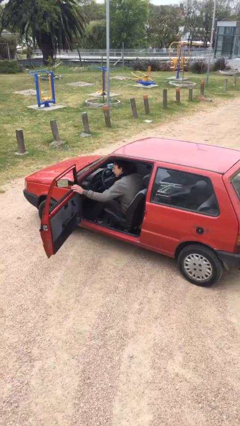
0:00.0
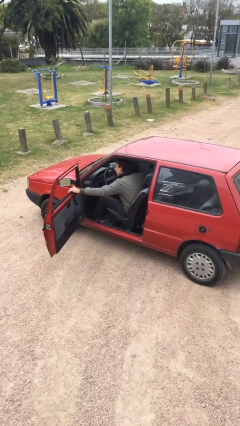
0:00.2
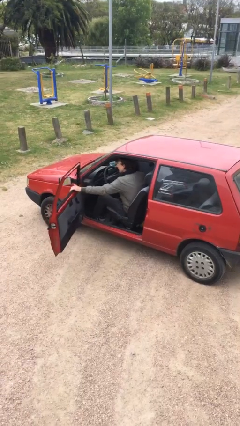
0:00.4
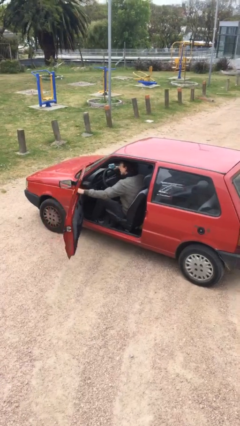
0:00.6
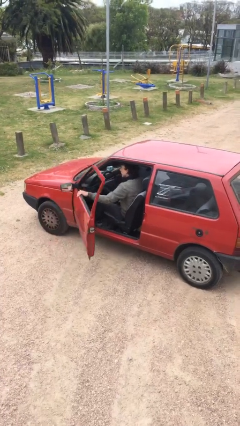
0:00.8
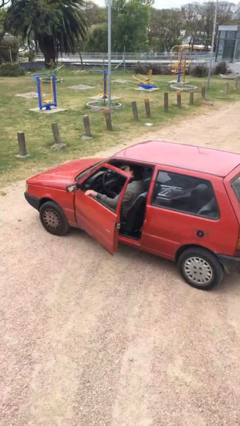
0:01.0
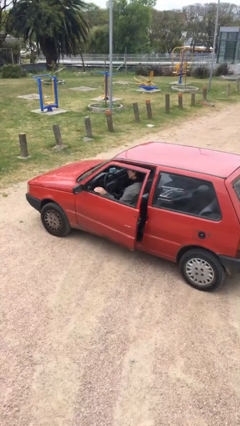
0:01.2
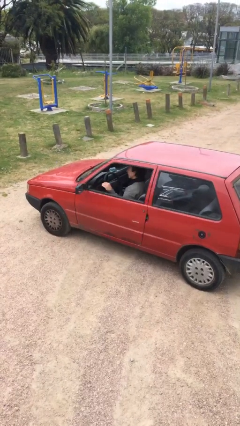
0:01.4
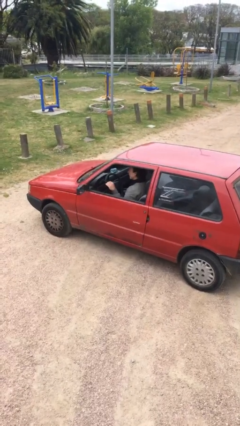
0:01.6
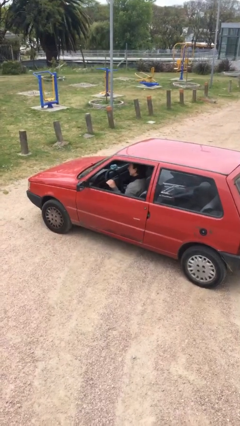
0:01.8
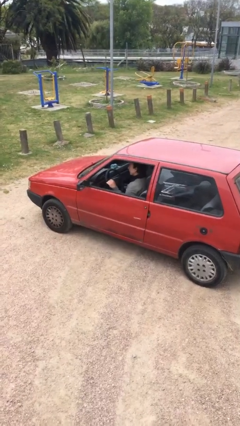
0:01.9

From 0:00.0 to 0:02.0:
person closes car door

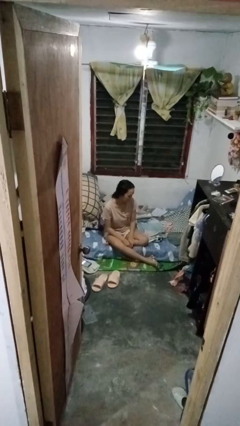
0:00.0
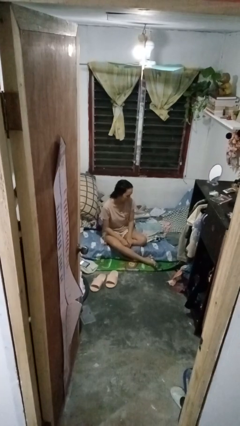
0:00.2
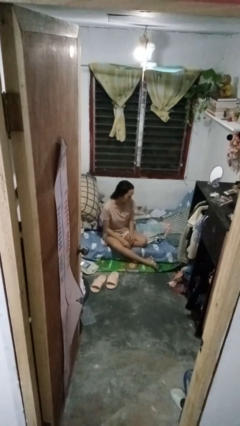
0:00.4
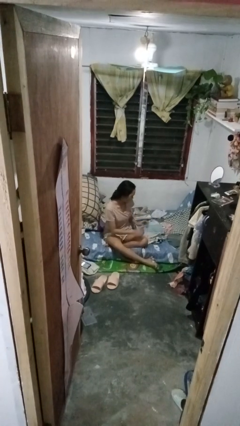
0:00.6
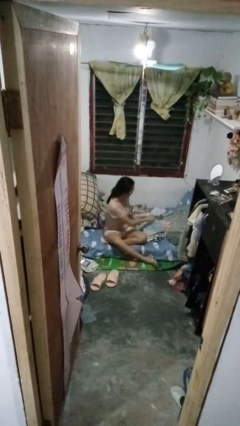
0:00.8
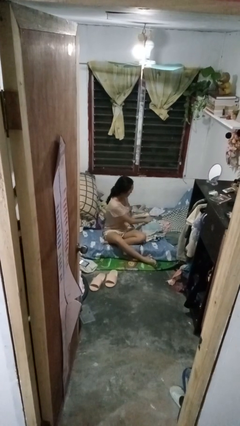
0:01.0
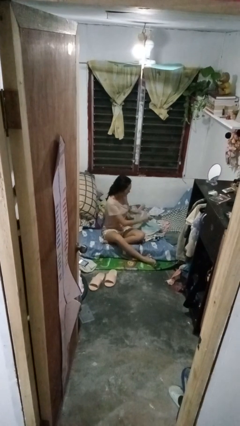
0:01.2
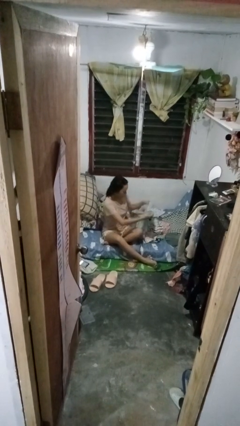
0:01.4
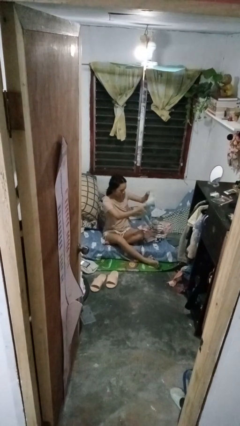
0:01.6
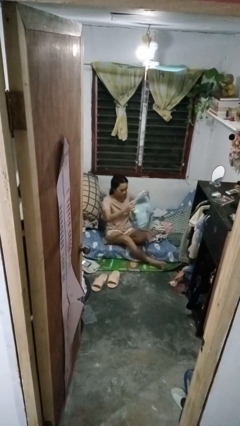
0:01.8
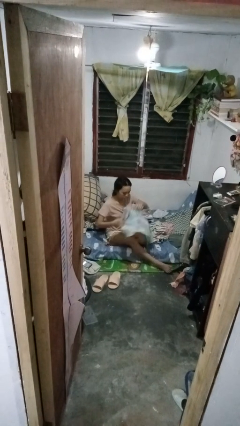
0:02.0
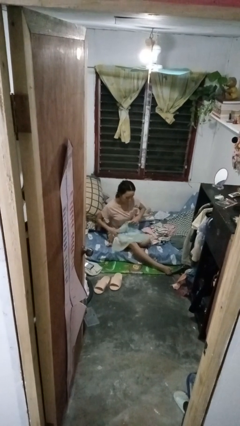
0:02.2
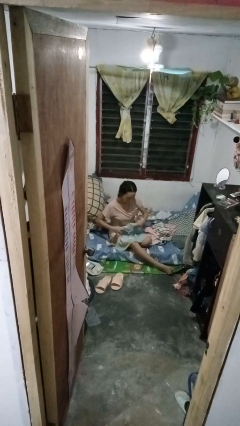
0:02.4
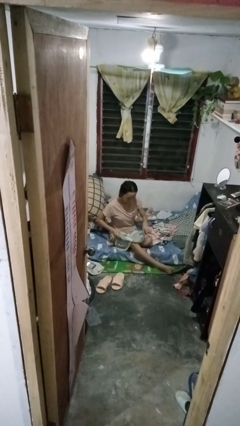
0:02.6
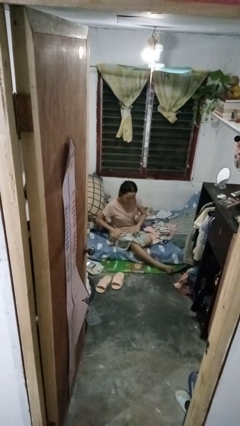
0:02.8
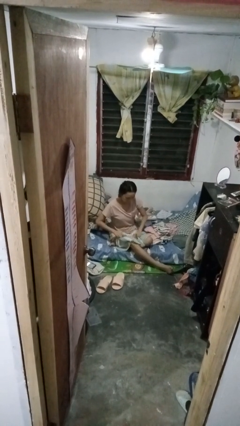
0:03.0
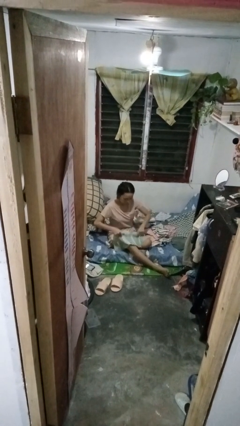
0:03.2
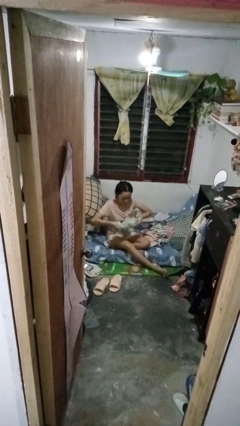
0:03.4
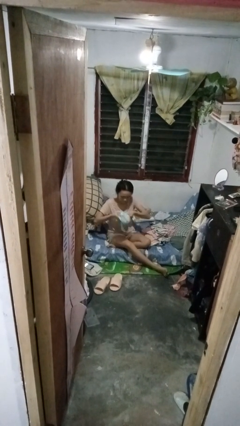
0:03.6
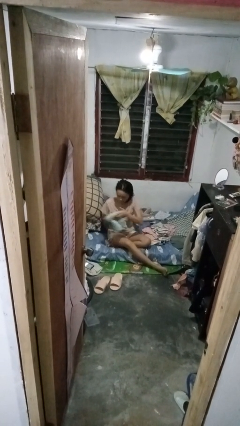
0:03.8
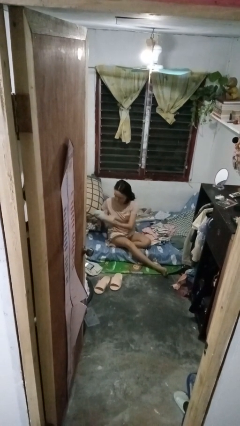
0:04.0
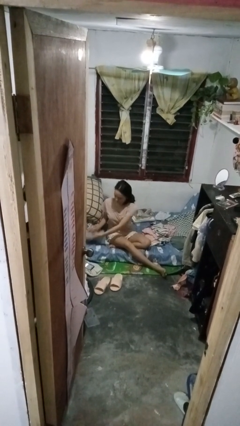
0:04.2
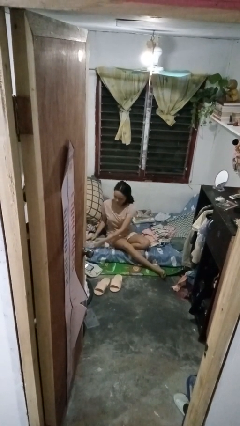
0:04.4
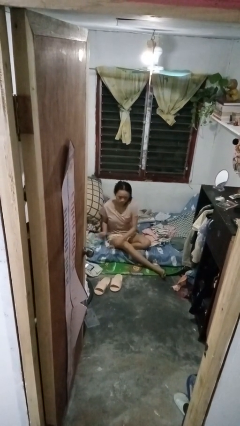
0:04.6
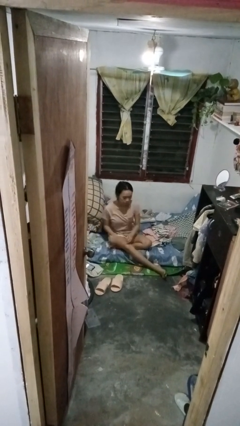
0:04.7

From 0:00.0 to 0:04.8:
person folds shirt

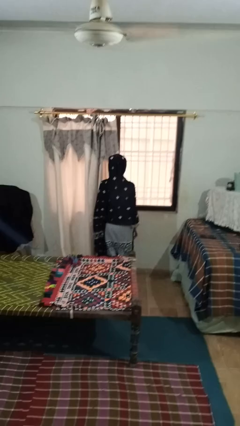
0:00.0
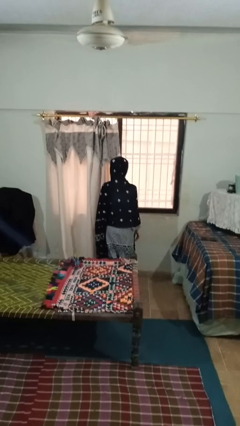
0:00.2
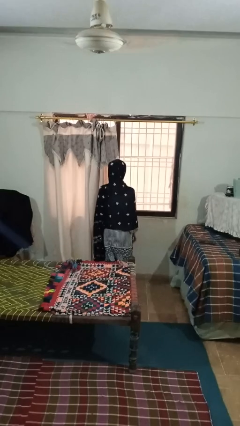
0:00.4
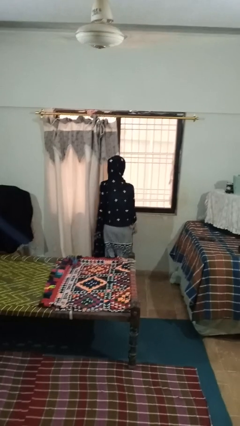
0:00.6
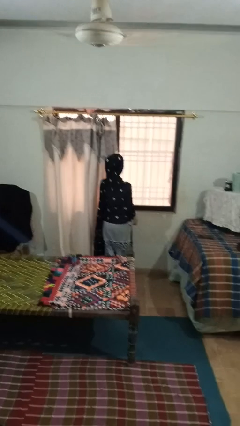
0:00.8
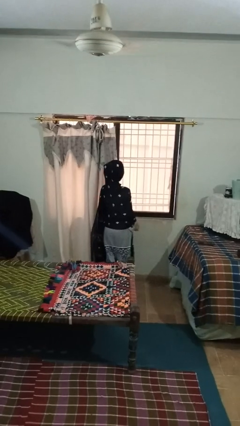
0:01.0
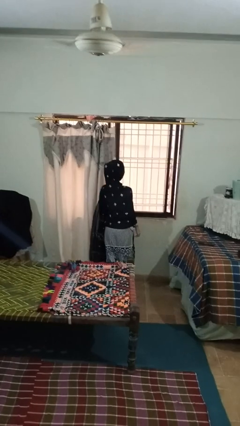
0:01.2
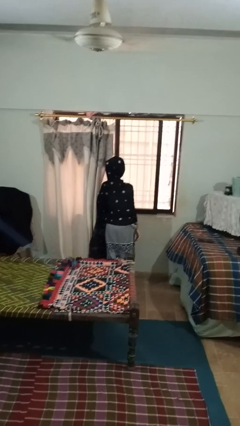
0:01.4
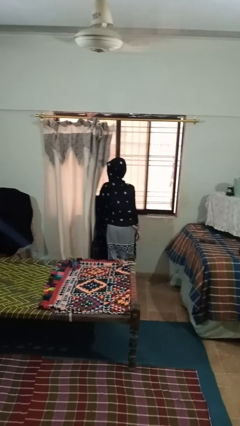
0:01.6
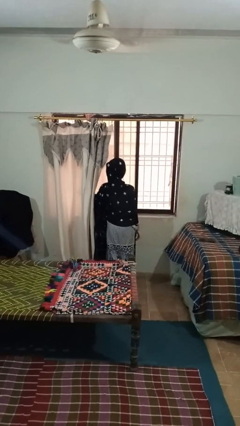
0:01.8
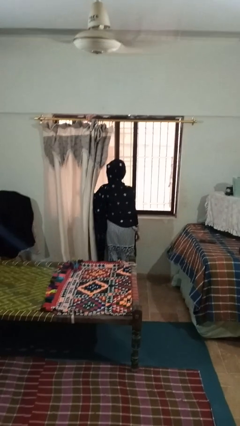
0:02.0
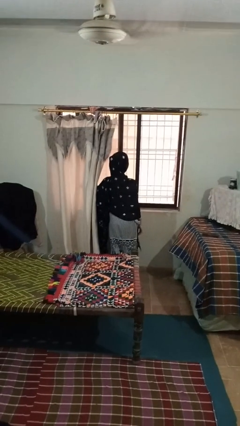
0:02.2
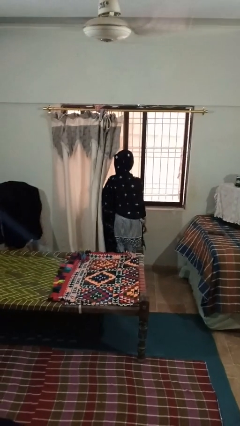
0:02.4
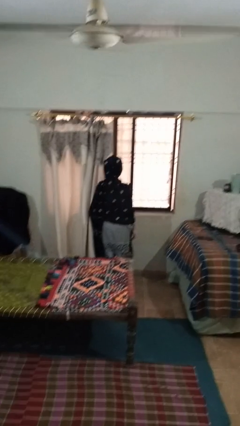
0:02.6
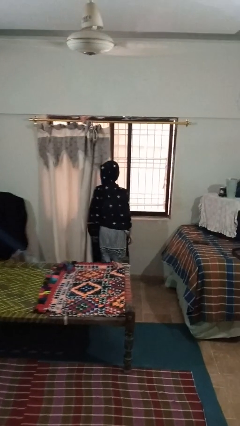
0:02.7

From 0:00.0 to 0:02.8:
person opens home window

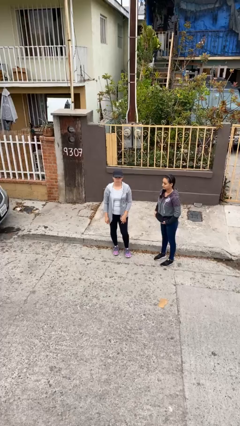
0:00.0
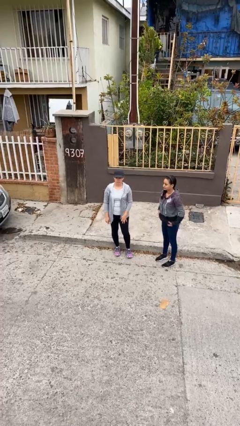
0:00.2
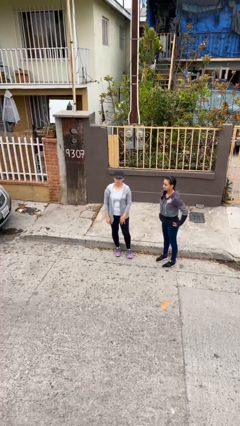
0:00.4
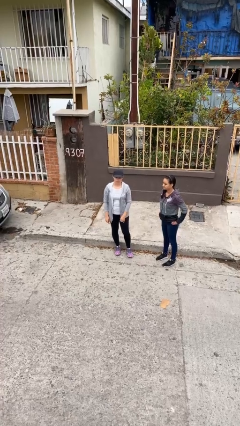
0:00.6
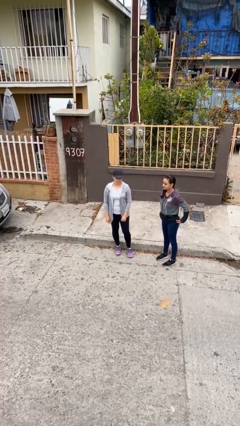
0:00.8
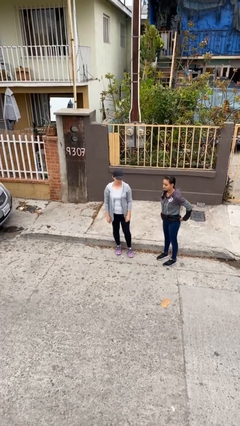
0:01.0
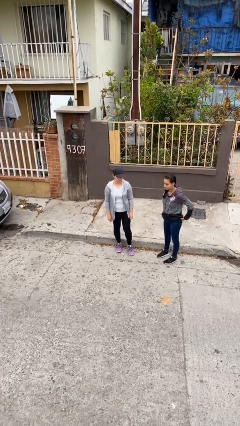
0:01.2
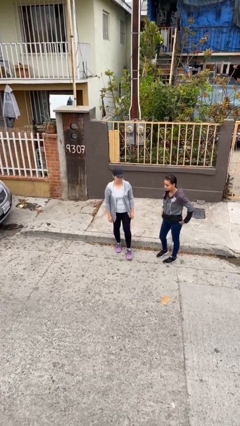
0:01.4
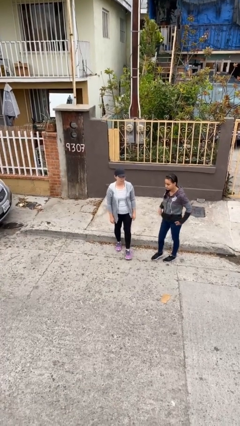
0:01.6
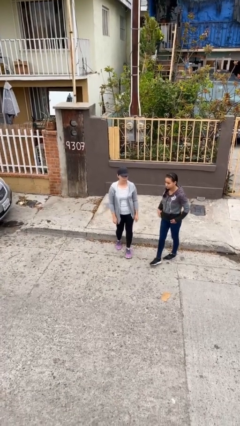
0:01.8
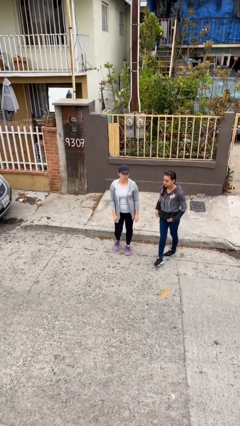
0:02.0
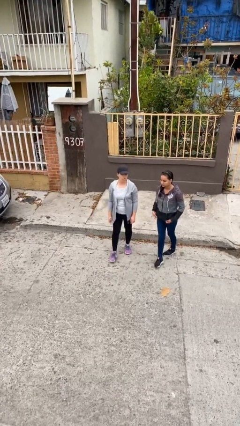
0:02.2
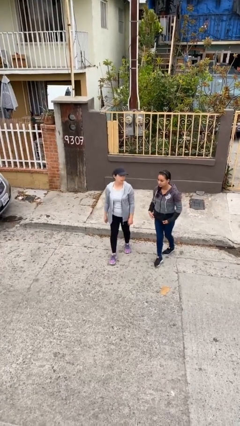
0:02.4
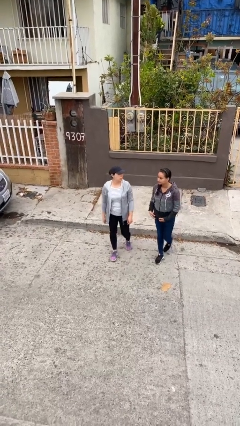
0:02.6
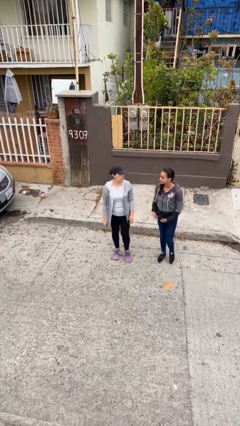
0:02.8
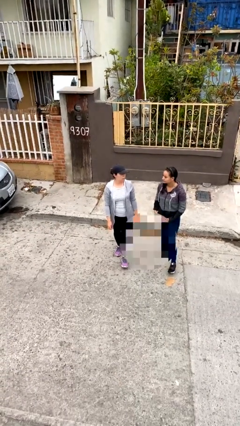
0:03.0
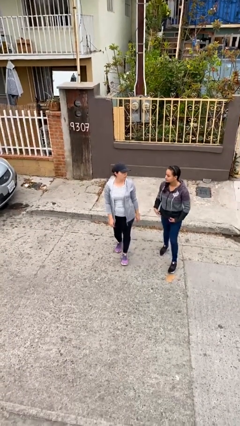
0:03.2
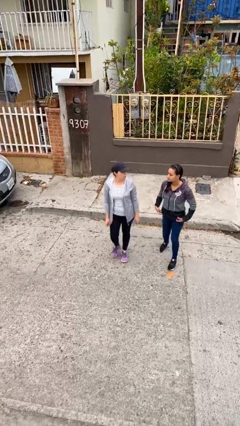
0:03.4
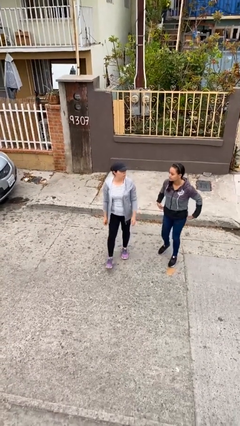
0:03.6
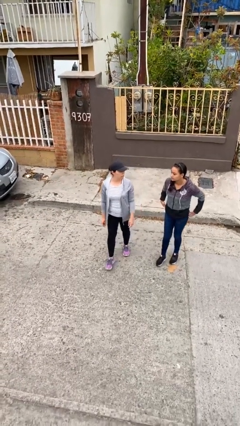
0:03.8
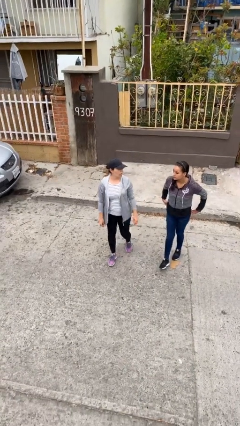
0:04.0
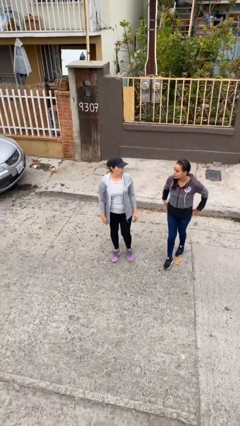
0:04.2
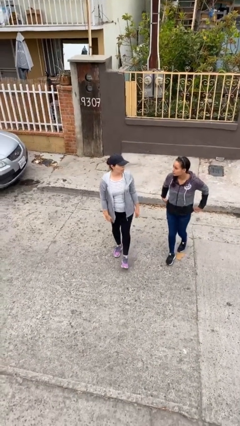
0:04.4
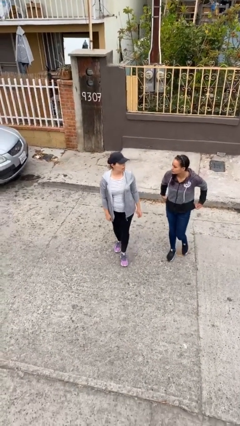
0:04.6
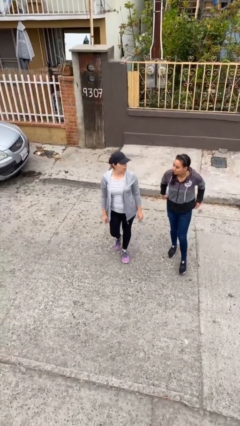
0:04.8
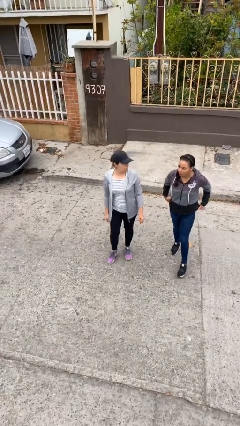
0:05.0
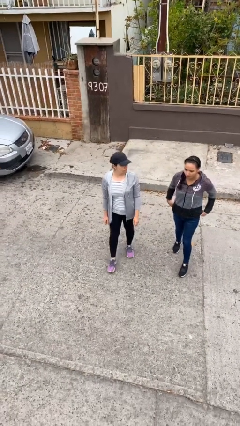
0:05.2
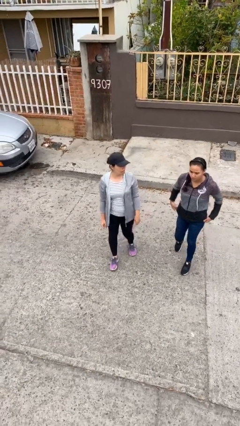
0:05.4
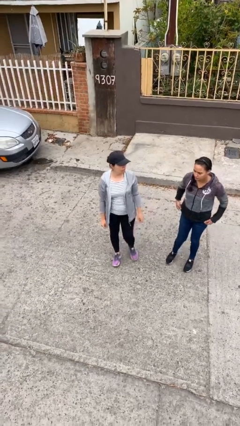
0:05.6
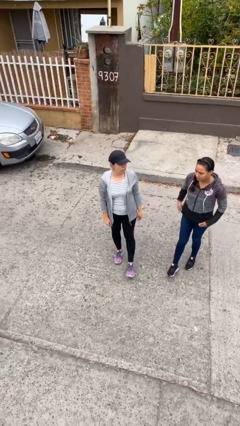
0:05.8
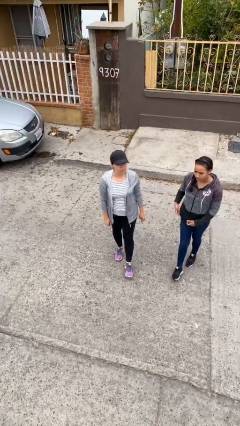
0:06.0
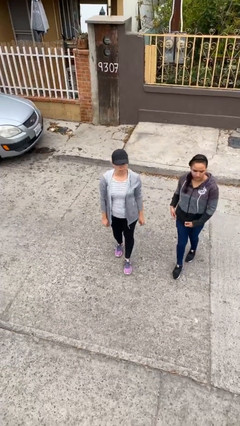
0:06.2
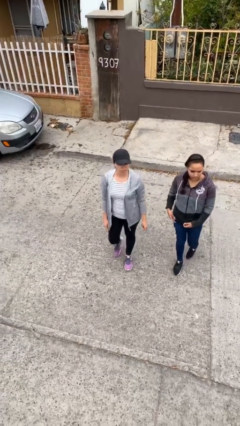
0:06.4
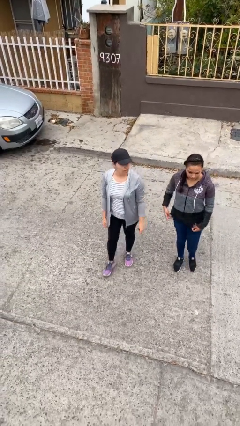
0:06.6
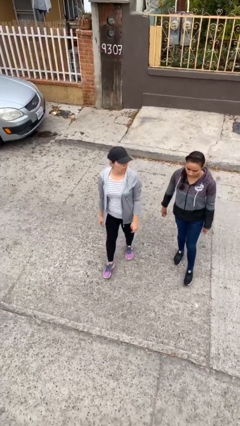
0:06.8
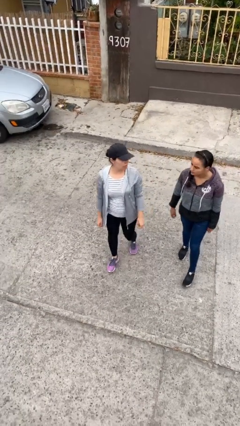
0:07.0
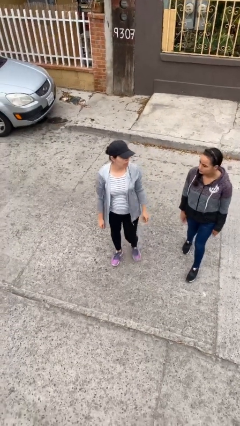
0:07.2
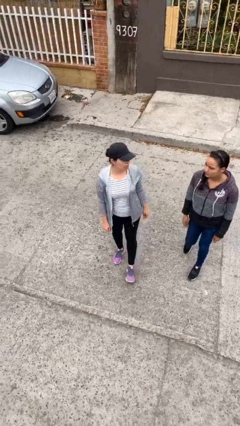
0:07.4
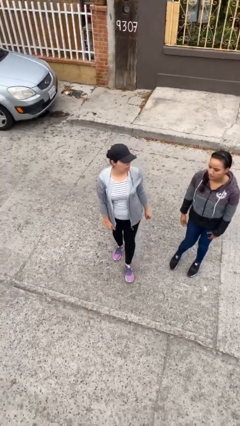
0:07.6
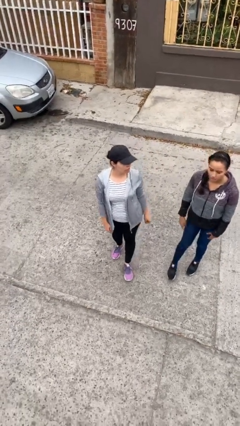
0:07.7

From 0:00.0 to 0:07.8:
person talks to person

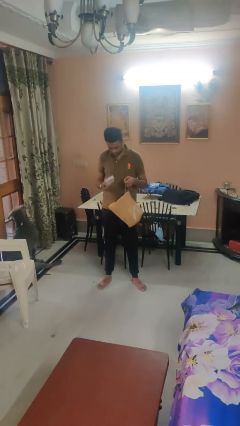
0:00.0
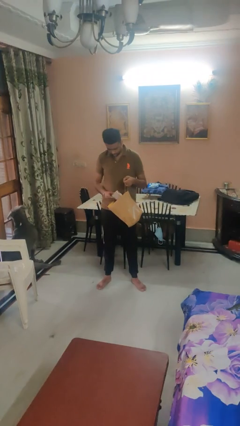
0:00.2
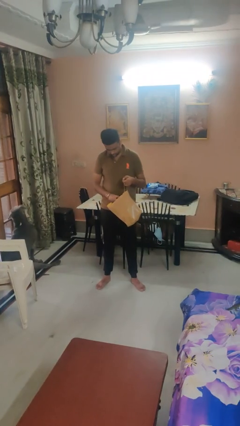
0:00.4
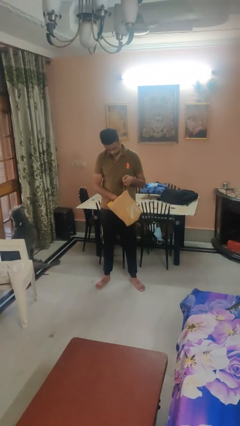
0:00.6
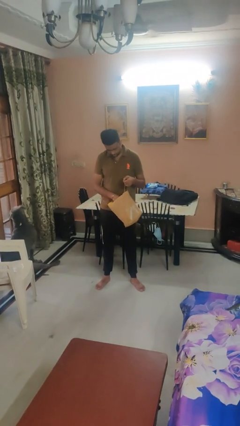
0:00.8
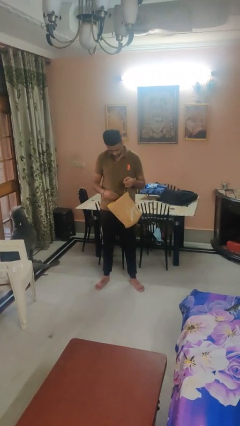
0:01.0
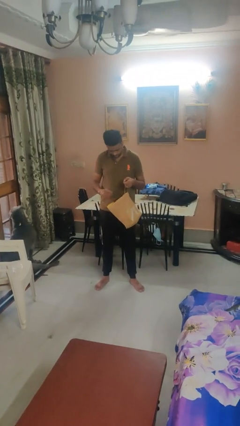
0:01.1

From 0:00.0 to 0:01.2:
person puts object into bag
